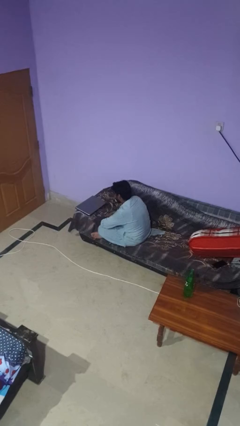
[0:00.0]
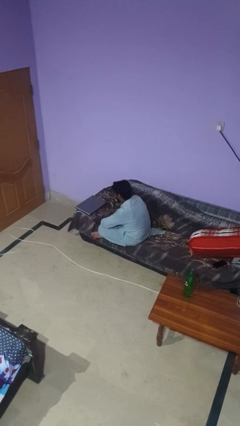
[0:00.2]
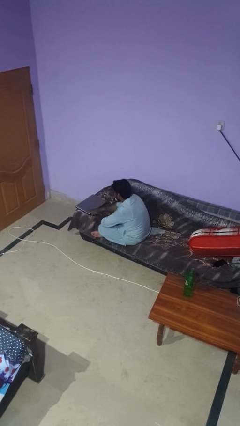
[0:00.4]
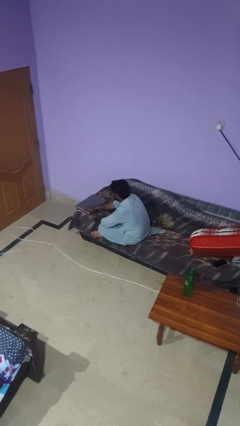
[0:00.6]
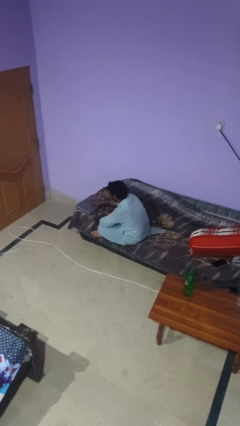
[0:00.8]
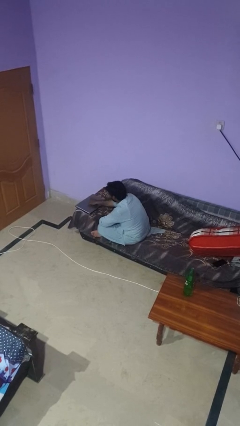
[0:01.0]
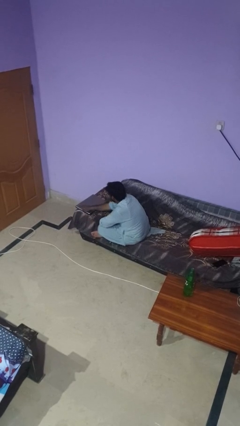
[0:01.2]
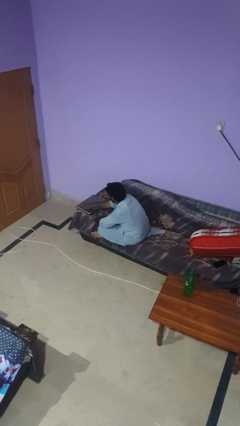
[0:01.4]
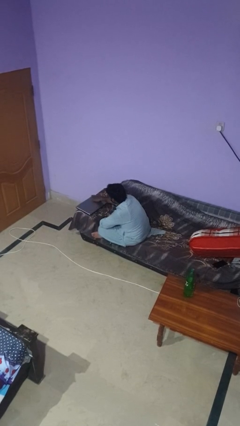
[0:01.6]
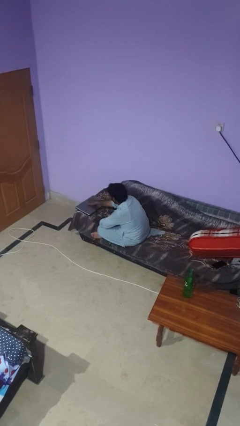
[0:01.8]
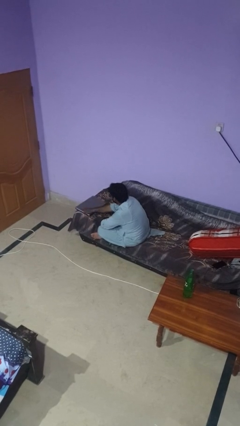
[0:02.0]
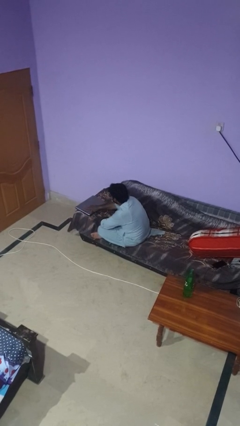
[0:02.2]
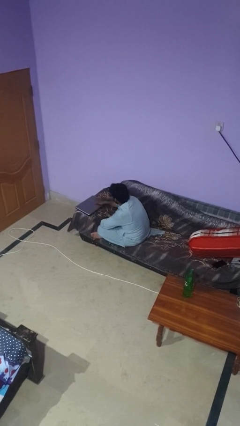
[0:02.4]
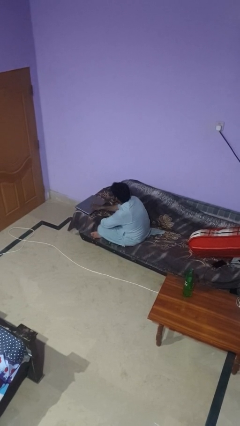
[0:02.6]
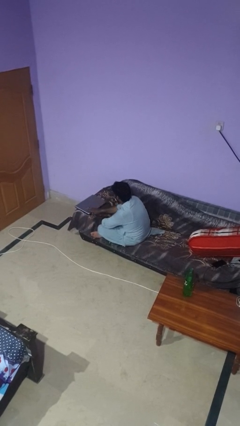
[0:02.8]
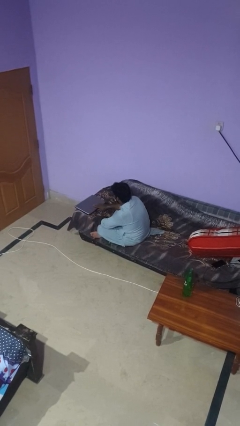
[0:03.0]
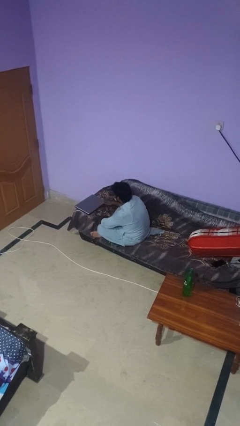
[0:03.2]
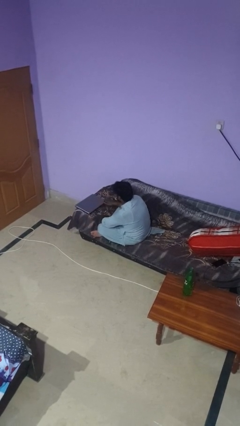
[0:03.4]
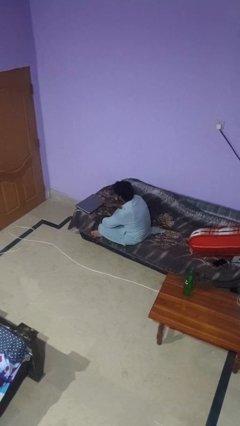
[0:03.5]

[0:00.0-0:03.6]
person waves hand over object

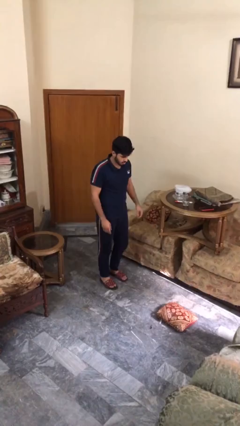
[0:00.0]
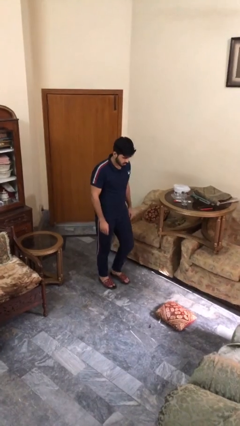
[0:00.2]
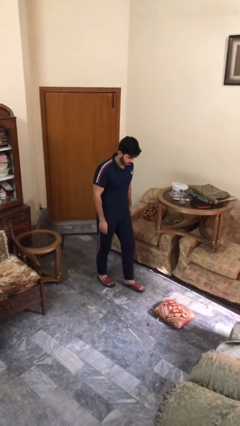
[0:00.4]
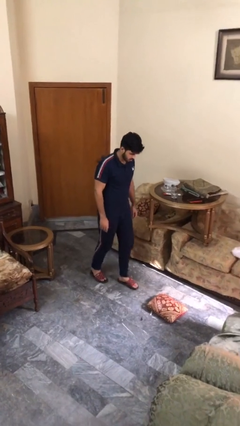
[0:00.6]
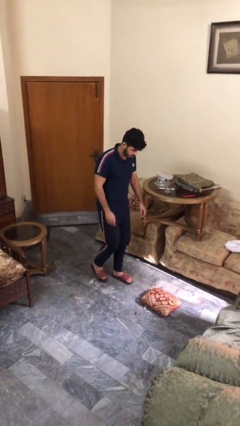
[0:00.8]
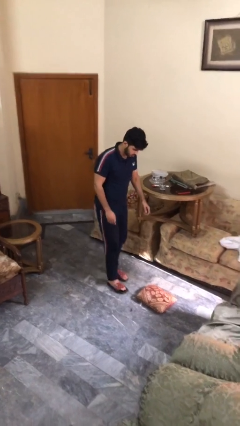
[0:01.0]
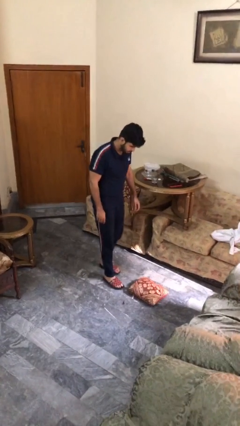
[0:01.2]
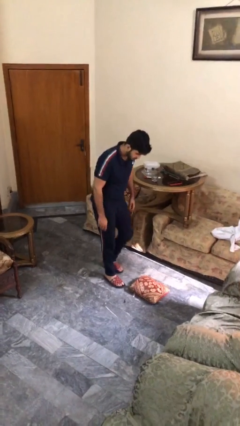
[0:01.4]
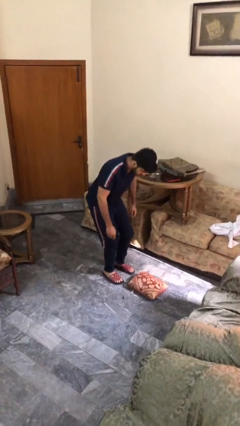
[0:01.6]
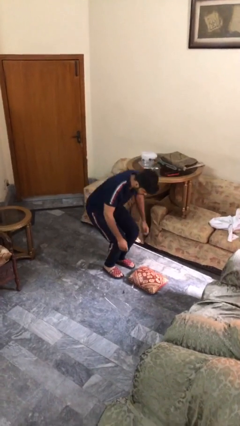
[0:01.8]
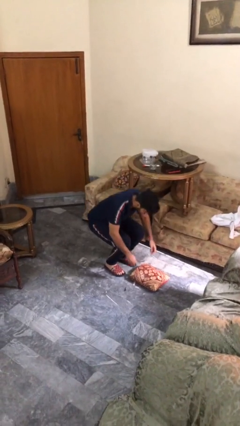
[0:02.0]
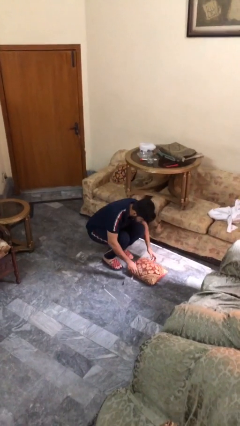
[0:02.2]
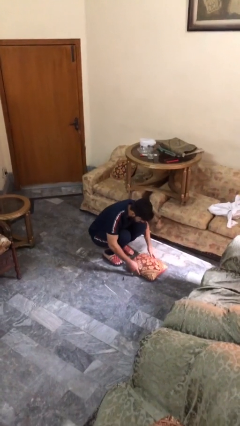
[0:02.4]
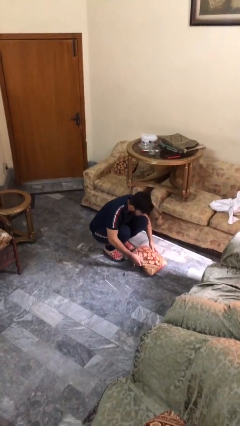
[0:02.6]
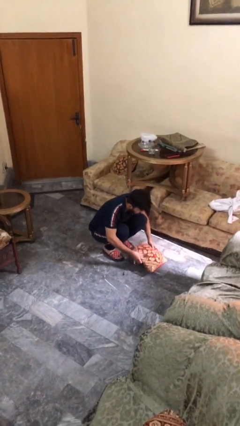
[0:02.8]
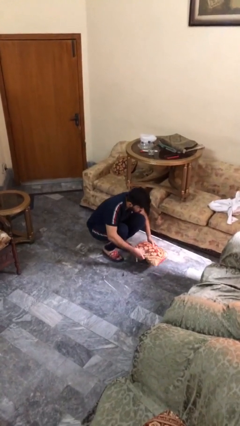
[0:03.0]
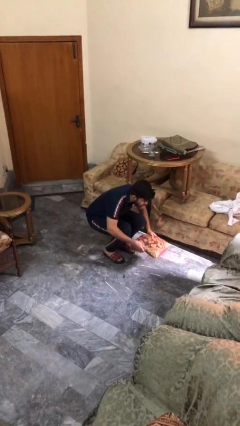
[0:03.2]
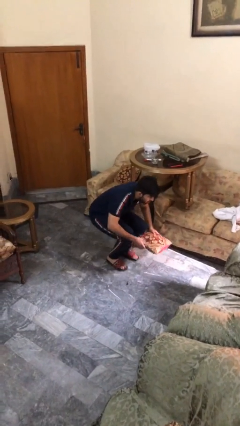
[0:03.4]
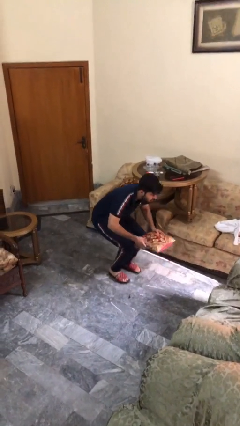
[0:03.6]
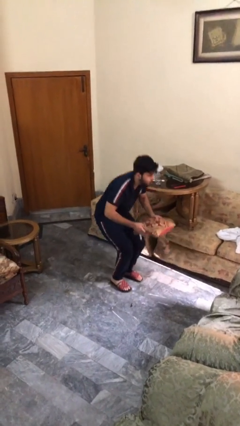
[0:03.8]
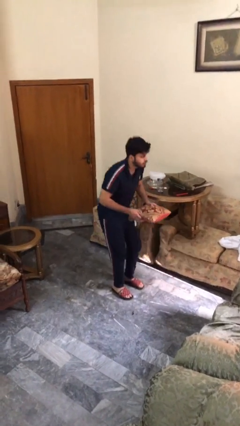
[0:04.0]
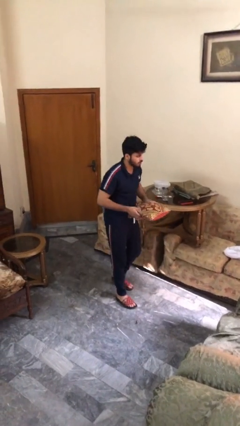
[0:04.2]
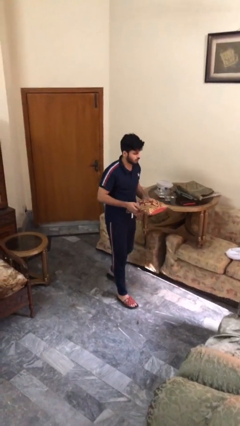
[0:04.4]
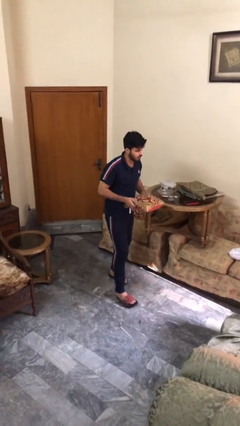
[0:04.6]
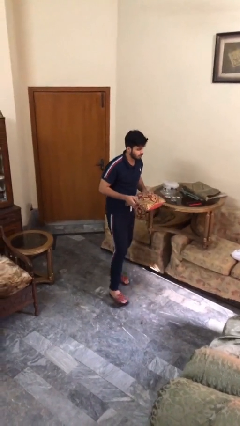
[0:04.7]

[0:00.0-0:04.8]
person picks up object from floor

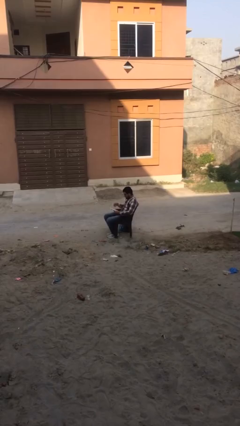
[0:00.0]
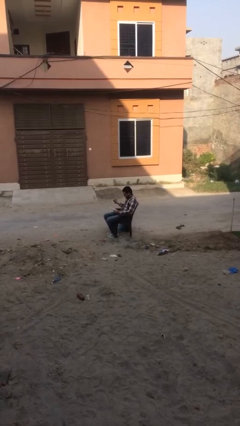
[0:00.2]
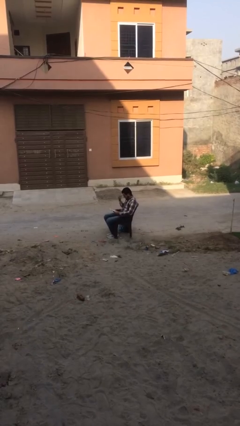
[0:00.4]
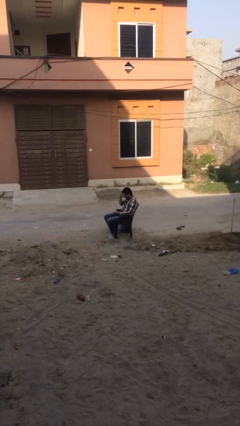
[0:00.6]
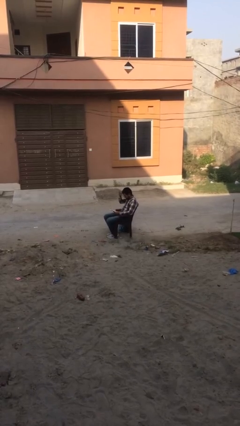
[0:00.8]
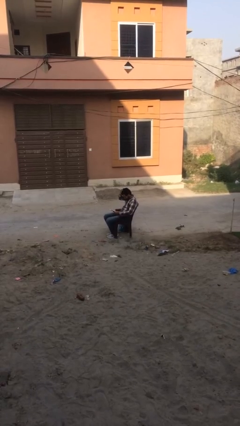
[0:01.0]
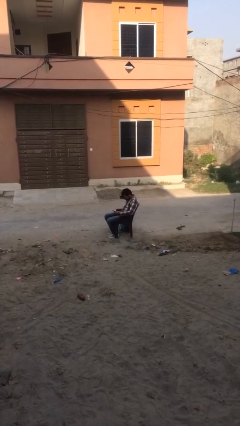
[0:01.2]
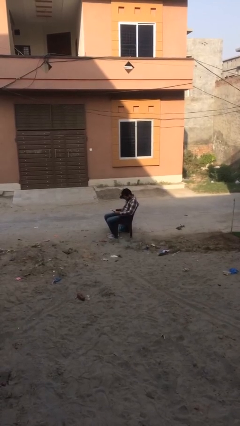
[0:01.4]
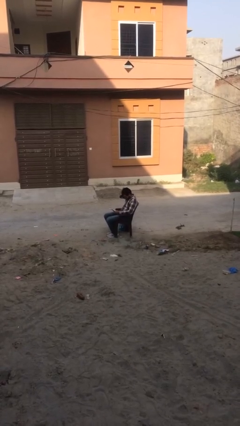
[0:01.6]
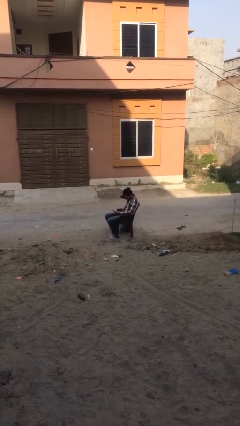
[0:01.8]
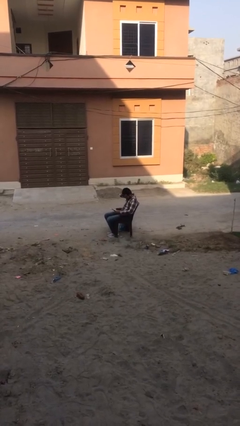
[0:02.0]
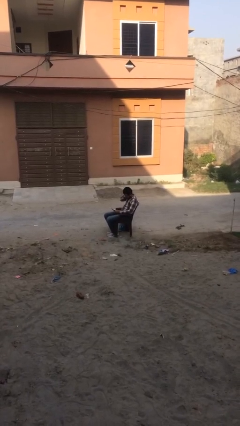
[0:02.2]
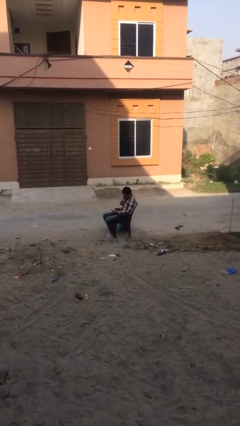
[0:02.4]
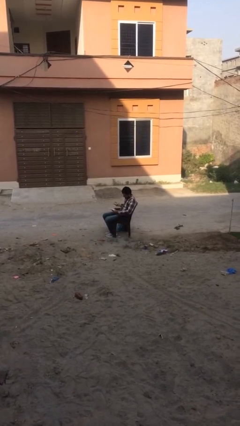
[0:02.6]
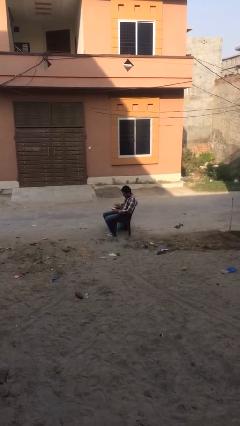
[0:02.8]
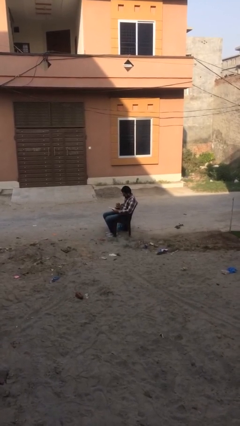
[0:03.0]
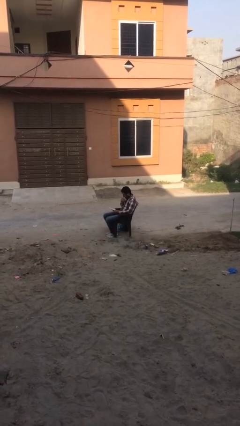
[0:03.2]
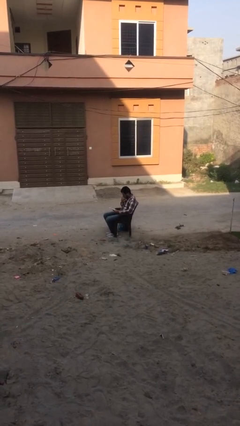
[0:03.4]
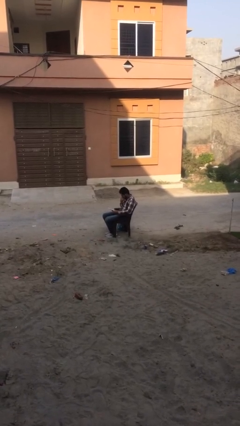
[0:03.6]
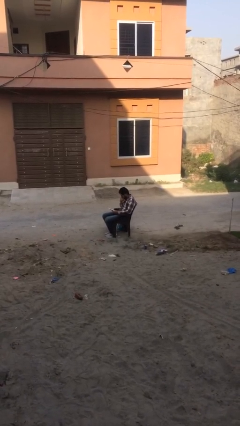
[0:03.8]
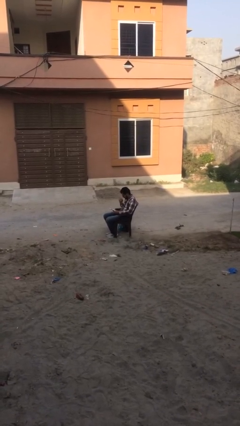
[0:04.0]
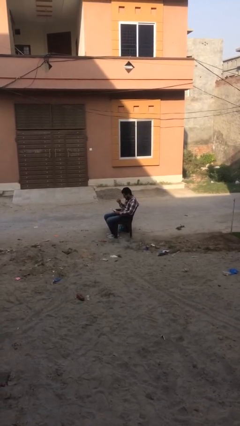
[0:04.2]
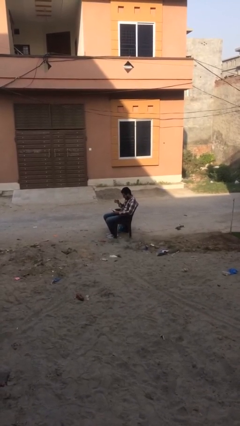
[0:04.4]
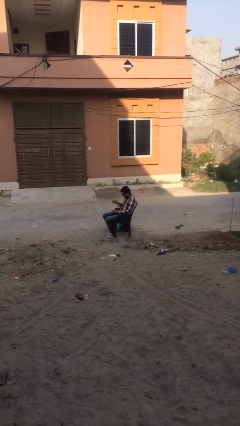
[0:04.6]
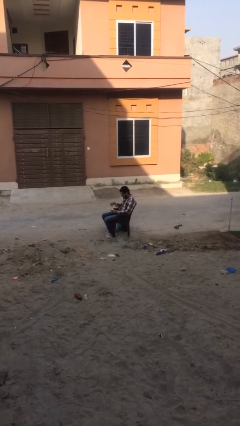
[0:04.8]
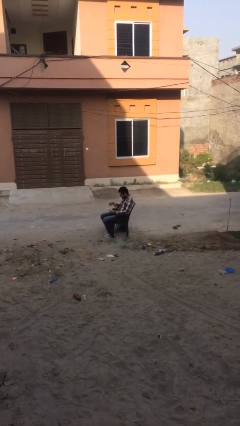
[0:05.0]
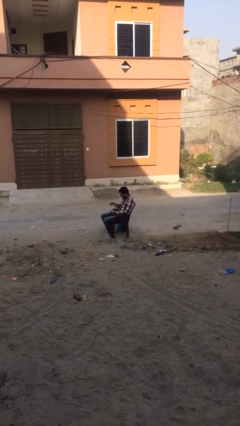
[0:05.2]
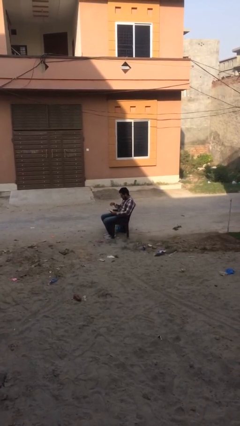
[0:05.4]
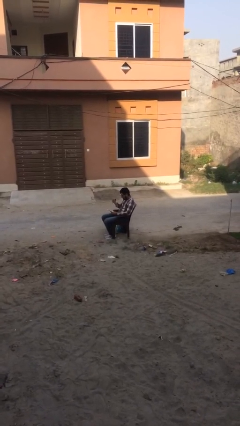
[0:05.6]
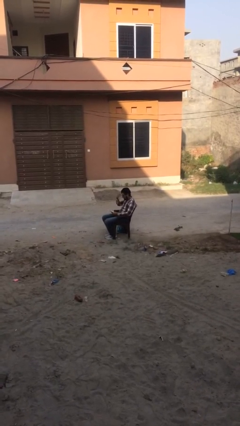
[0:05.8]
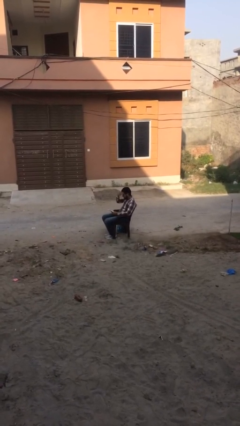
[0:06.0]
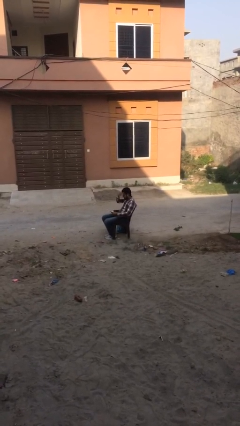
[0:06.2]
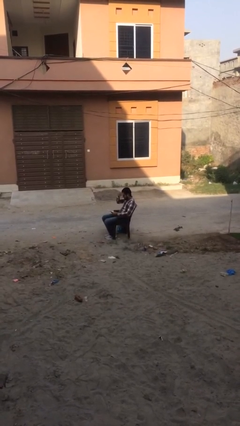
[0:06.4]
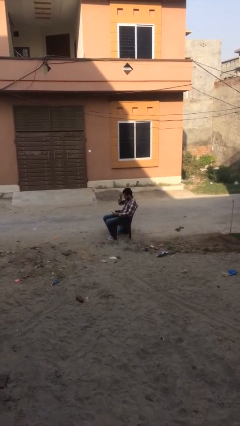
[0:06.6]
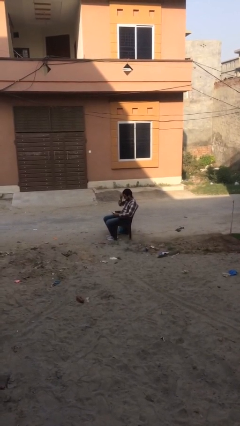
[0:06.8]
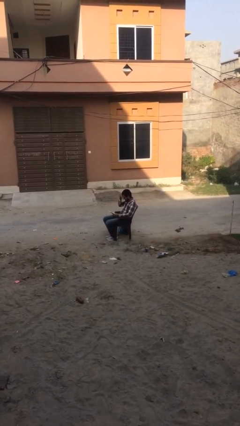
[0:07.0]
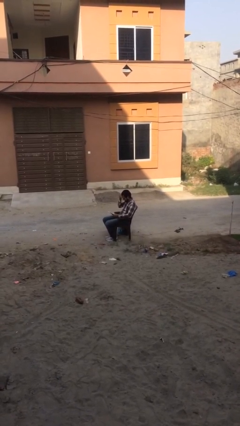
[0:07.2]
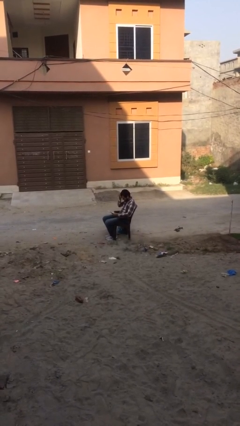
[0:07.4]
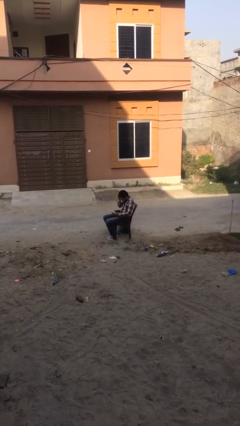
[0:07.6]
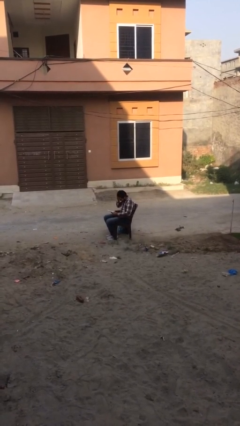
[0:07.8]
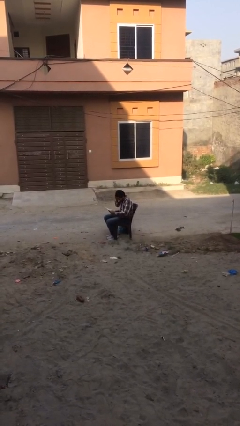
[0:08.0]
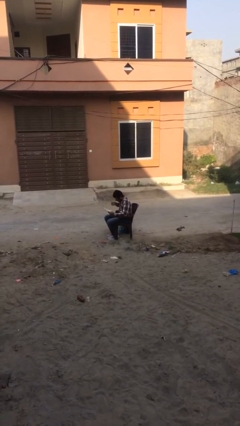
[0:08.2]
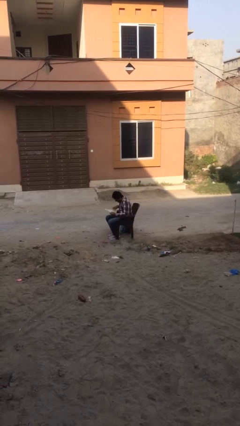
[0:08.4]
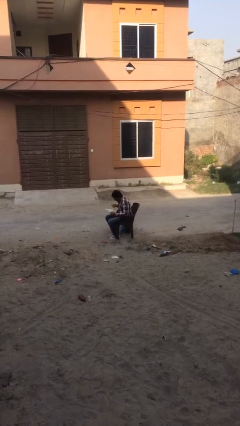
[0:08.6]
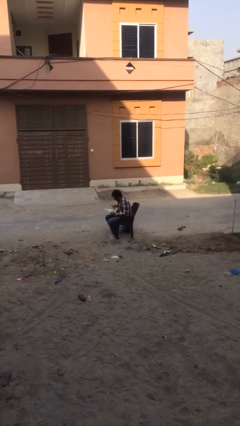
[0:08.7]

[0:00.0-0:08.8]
person reads document

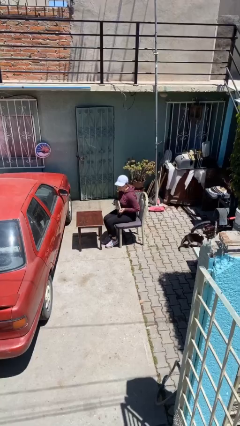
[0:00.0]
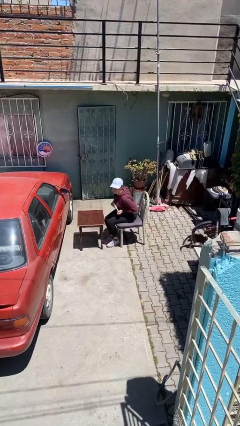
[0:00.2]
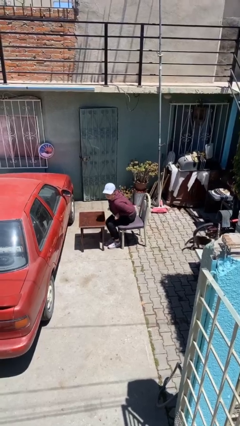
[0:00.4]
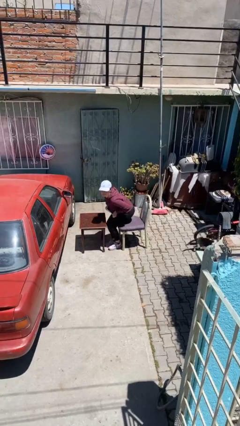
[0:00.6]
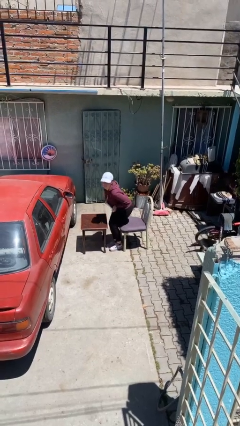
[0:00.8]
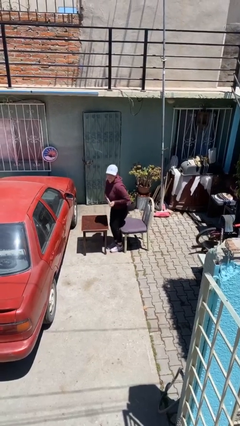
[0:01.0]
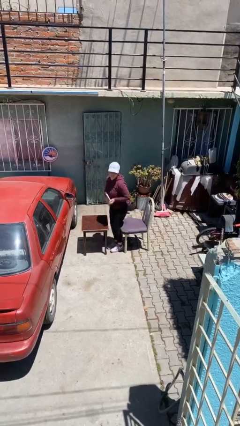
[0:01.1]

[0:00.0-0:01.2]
person stands up
